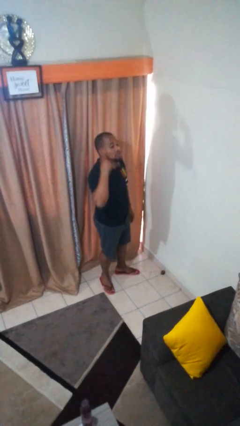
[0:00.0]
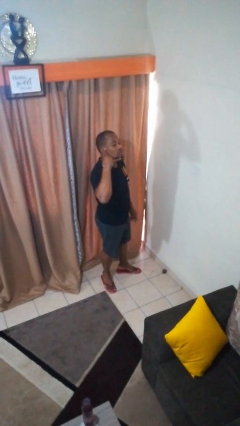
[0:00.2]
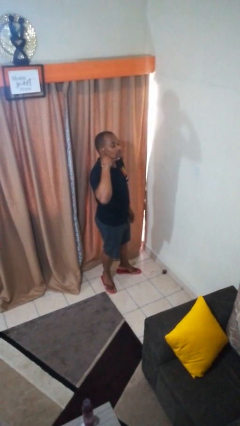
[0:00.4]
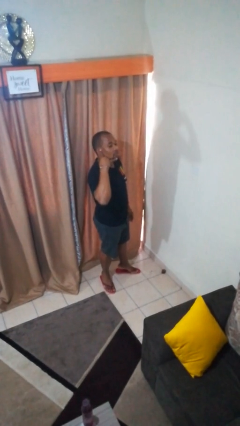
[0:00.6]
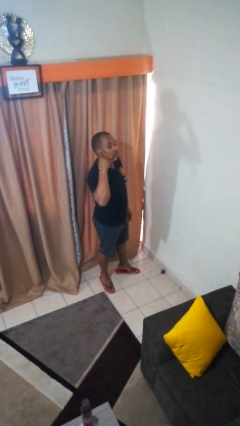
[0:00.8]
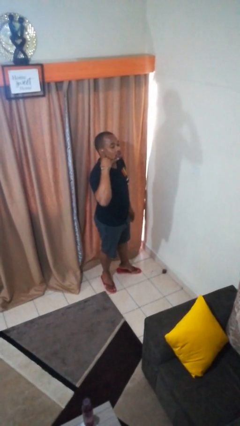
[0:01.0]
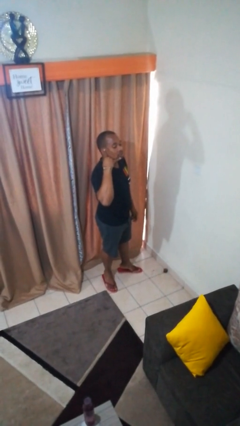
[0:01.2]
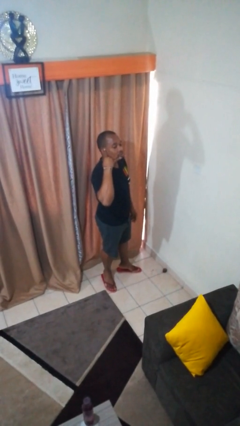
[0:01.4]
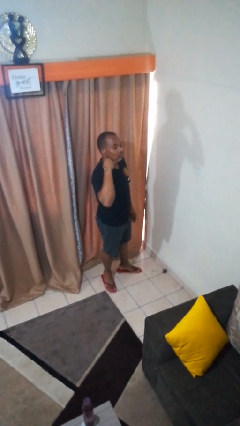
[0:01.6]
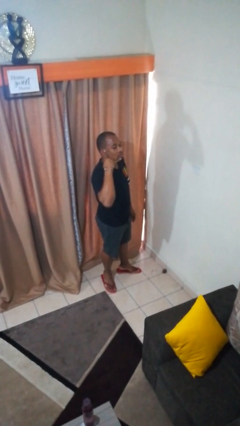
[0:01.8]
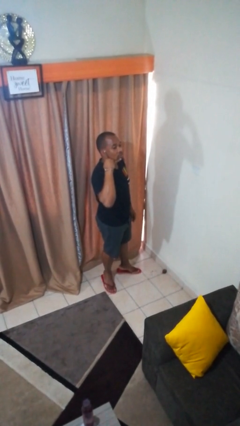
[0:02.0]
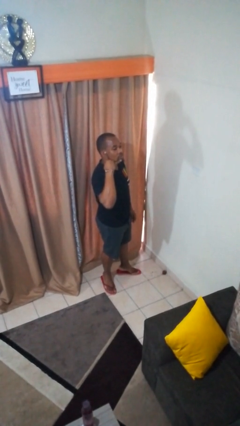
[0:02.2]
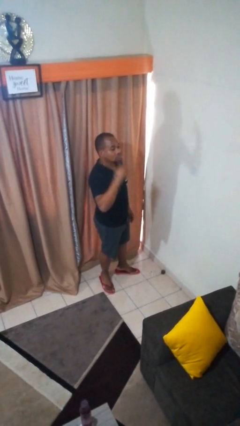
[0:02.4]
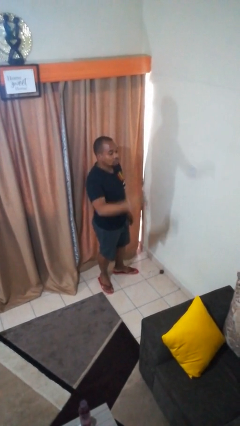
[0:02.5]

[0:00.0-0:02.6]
person gestures call me

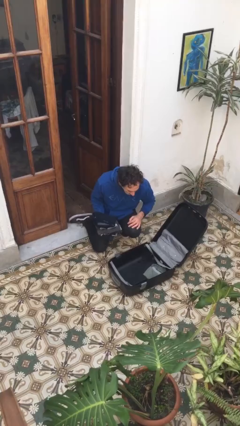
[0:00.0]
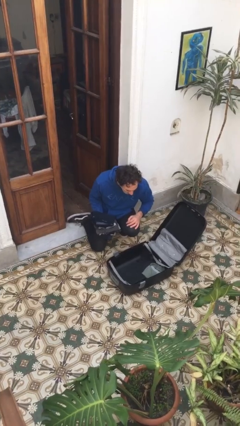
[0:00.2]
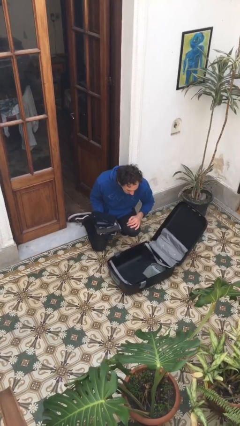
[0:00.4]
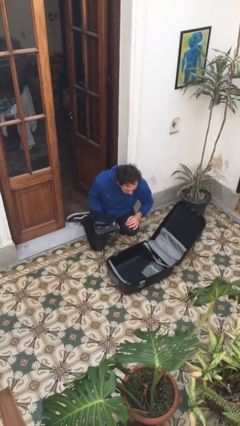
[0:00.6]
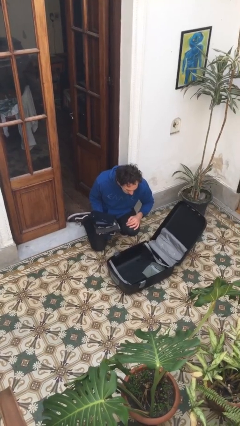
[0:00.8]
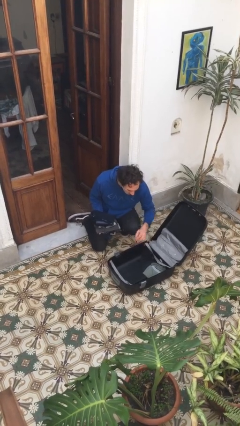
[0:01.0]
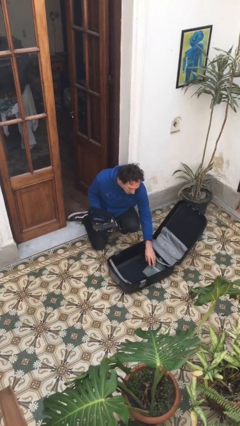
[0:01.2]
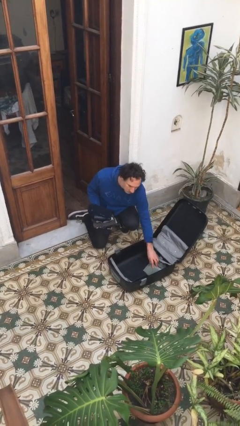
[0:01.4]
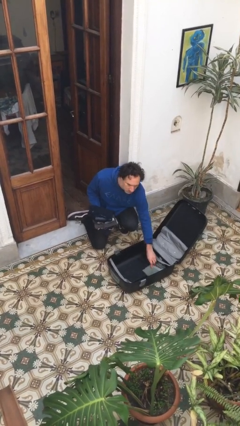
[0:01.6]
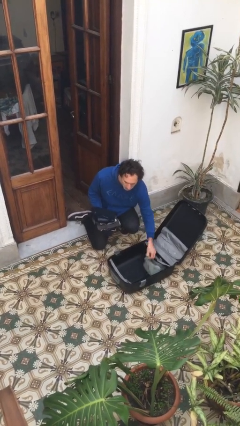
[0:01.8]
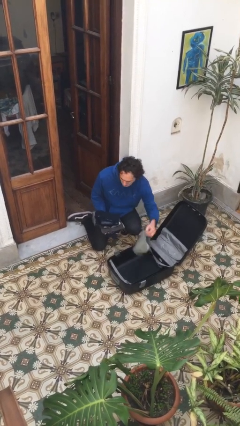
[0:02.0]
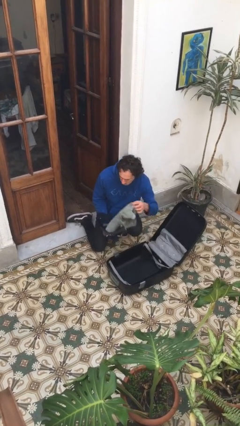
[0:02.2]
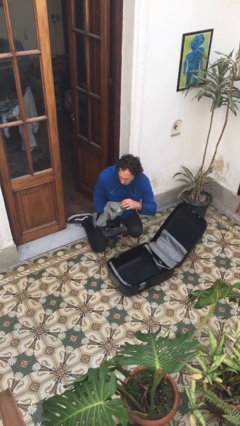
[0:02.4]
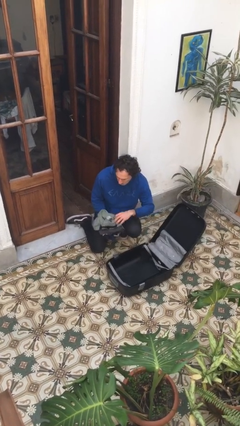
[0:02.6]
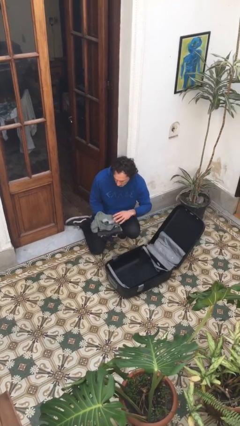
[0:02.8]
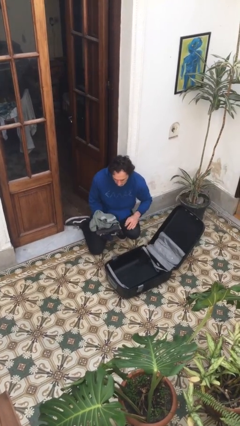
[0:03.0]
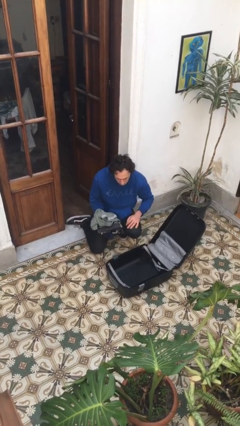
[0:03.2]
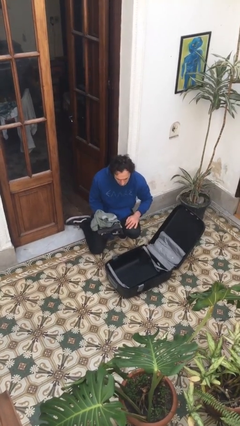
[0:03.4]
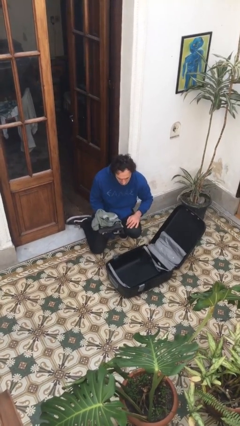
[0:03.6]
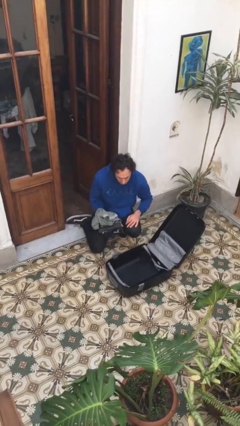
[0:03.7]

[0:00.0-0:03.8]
person unloads clothes from suitcase

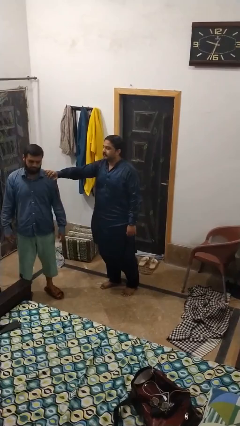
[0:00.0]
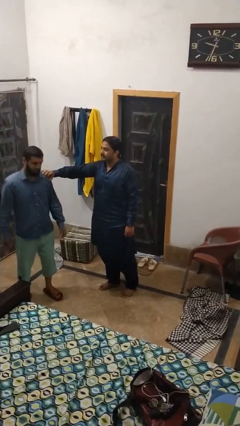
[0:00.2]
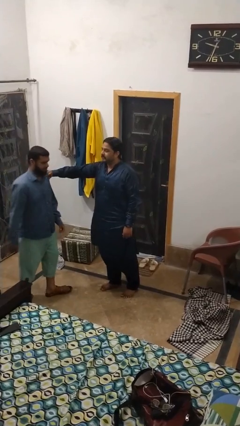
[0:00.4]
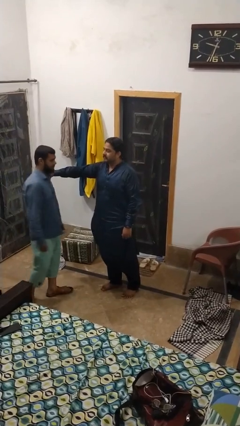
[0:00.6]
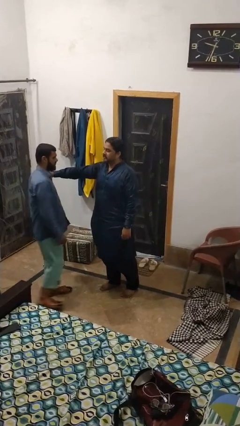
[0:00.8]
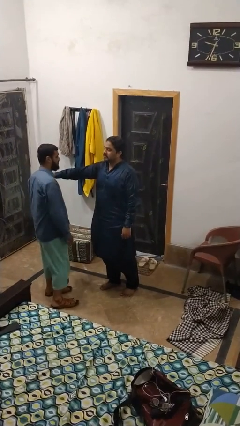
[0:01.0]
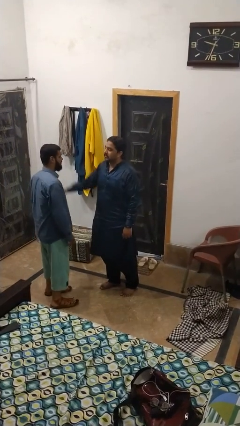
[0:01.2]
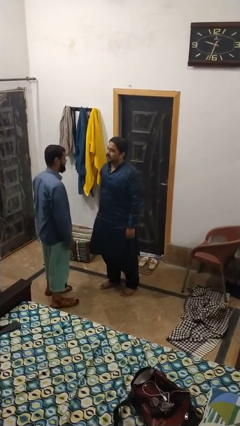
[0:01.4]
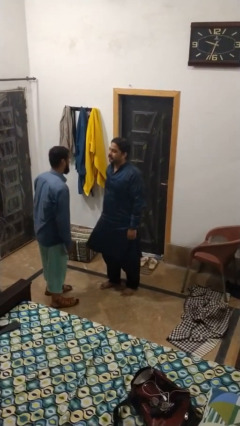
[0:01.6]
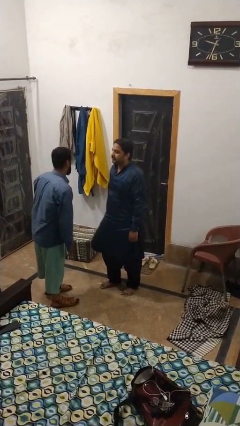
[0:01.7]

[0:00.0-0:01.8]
person spins person around

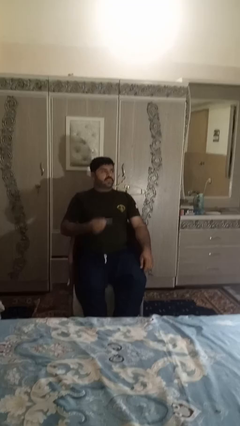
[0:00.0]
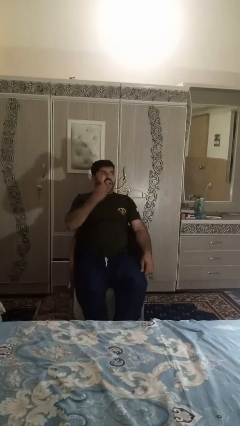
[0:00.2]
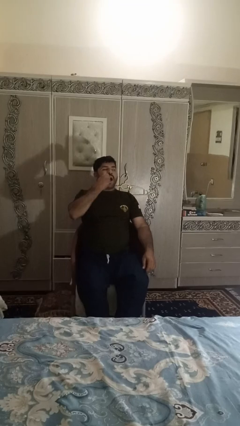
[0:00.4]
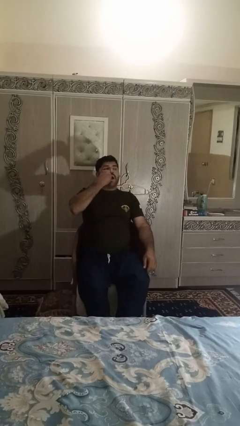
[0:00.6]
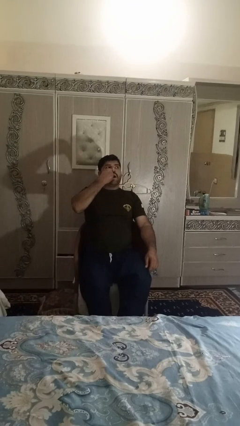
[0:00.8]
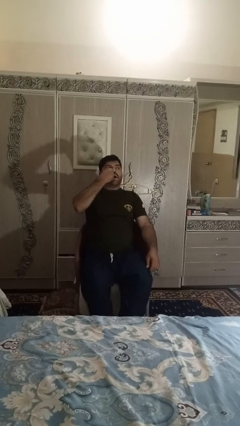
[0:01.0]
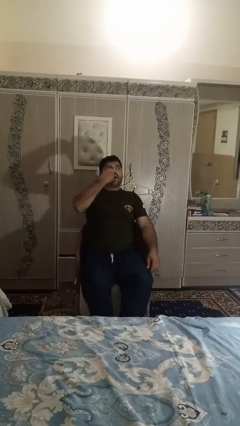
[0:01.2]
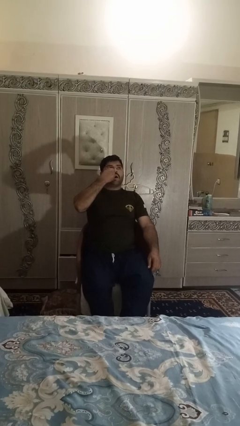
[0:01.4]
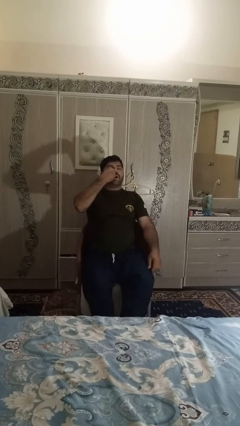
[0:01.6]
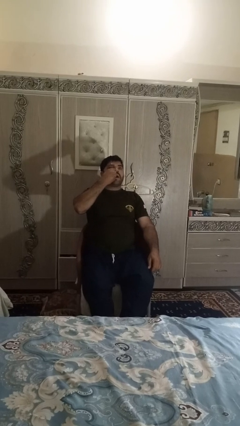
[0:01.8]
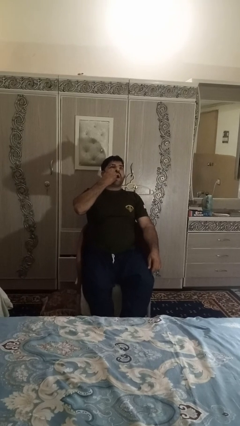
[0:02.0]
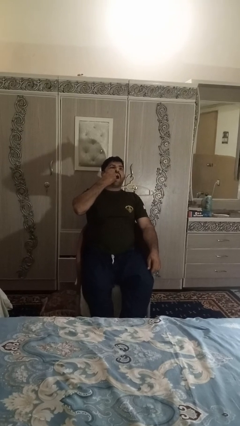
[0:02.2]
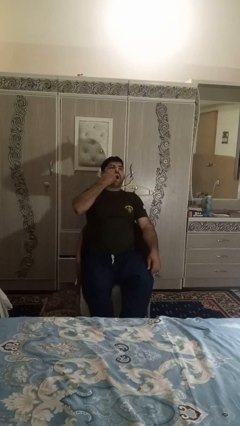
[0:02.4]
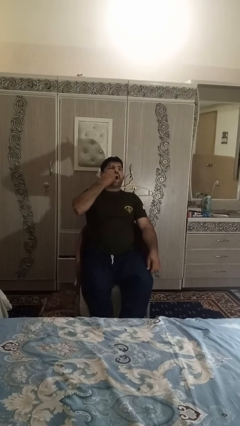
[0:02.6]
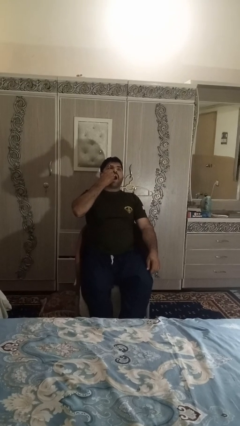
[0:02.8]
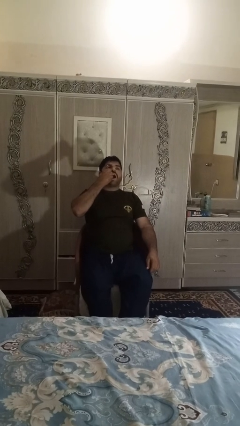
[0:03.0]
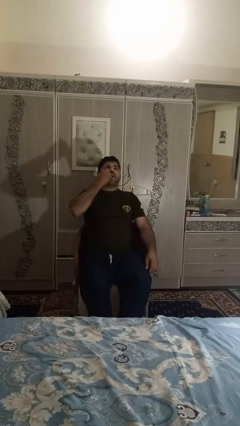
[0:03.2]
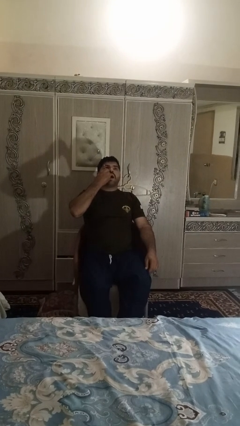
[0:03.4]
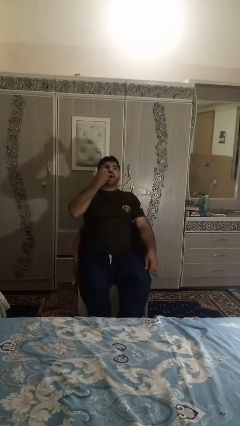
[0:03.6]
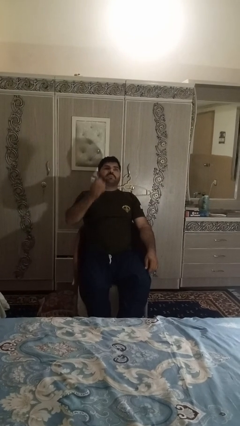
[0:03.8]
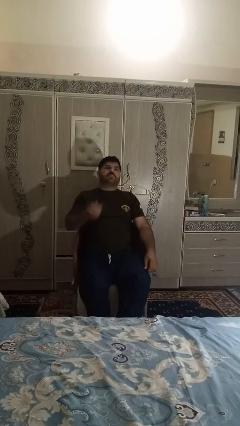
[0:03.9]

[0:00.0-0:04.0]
person flosses

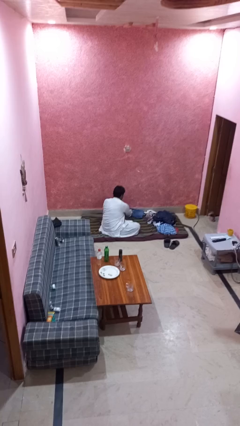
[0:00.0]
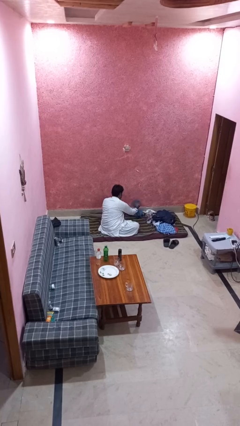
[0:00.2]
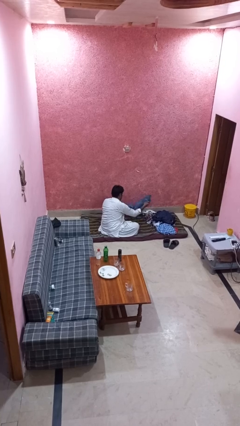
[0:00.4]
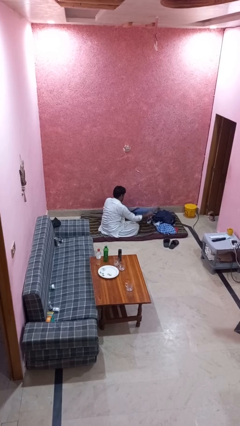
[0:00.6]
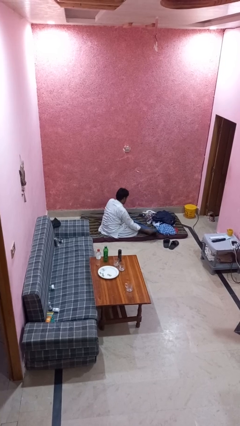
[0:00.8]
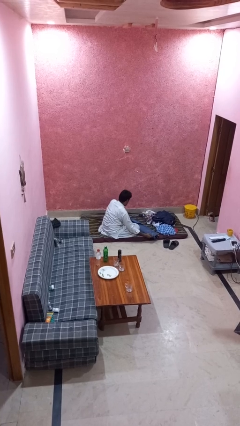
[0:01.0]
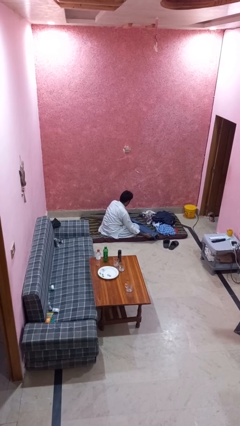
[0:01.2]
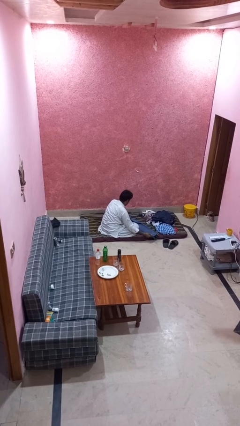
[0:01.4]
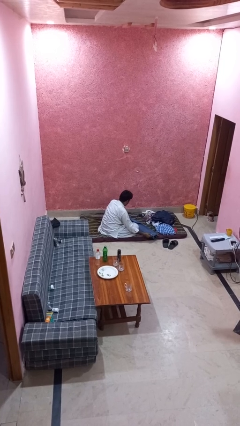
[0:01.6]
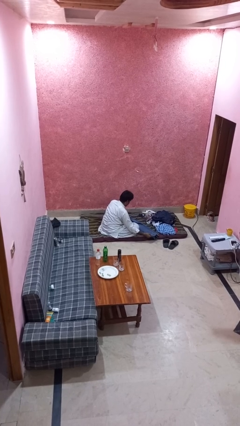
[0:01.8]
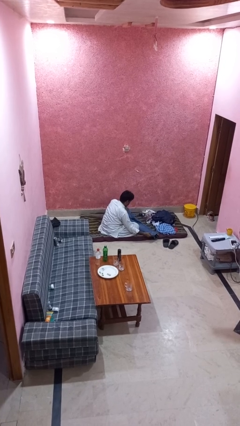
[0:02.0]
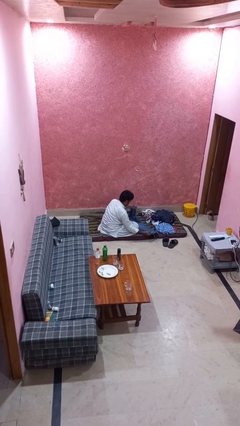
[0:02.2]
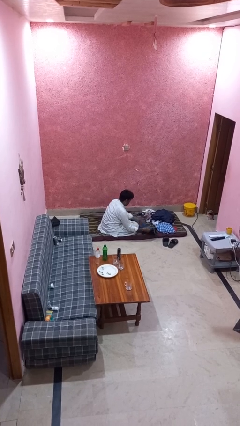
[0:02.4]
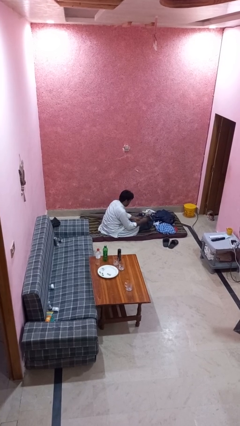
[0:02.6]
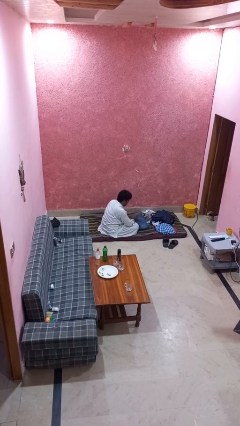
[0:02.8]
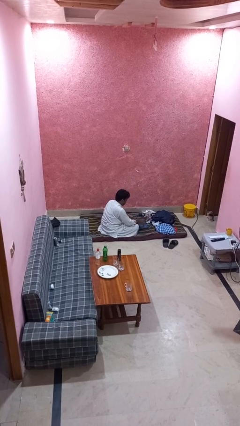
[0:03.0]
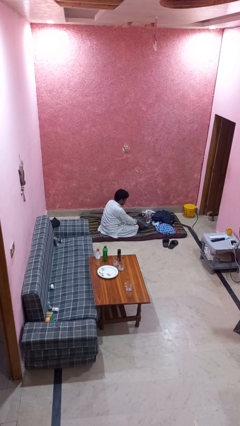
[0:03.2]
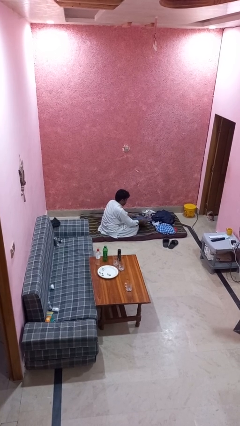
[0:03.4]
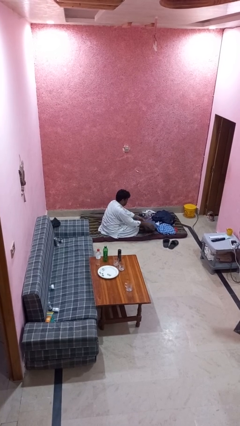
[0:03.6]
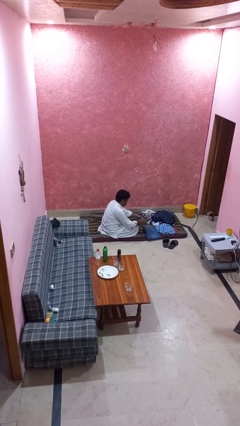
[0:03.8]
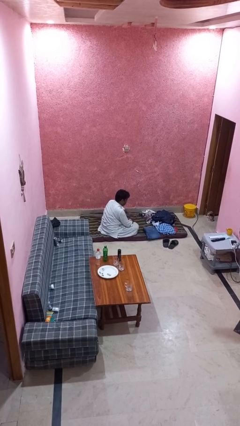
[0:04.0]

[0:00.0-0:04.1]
person folds pants

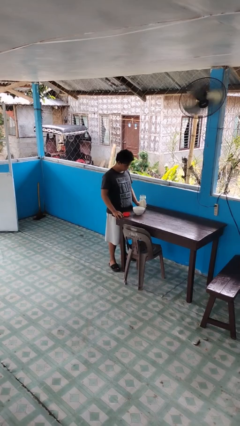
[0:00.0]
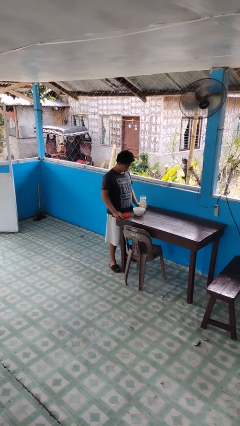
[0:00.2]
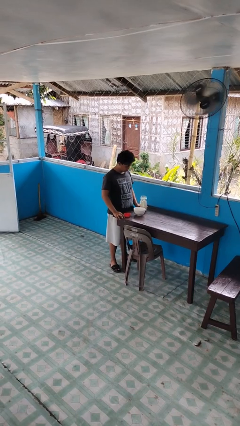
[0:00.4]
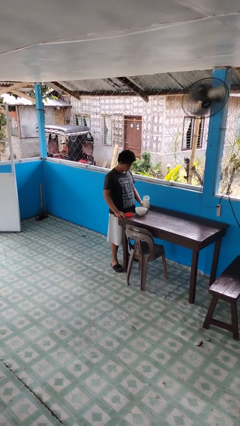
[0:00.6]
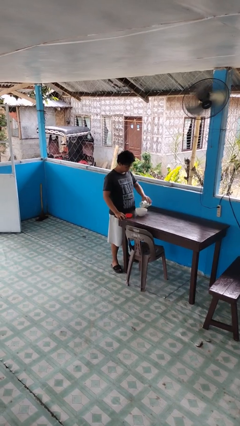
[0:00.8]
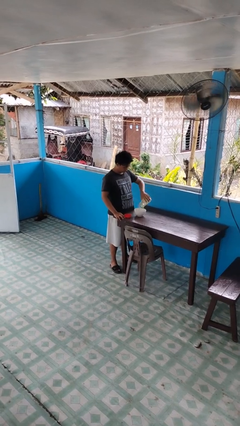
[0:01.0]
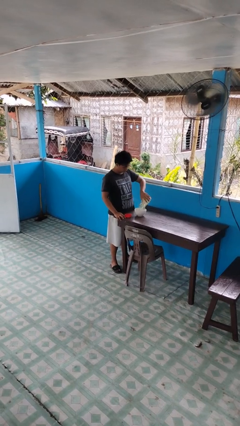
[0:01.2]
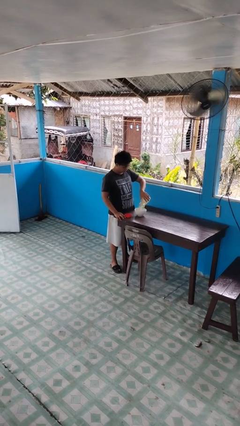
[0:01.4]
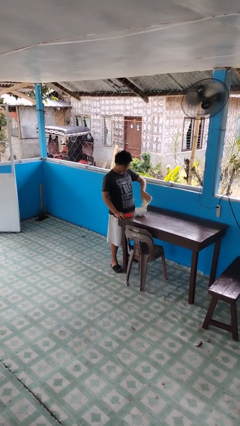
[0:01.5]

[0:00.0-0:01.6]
person pours into bowl
